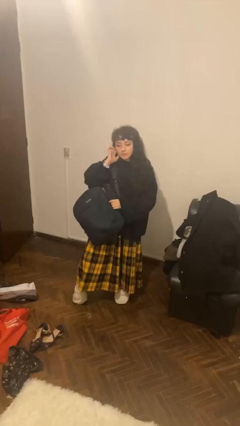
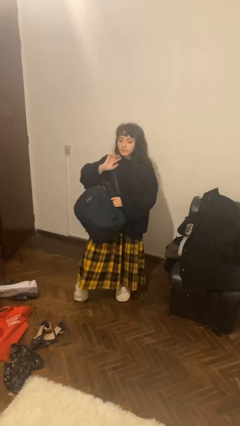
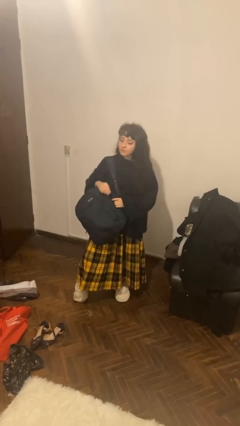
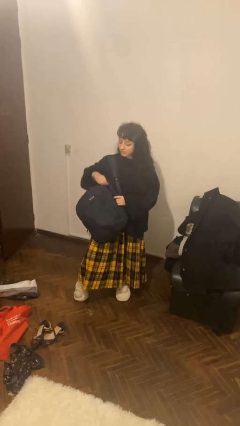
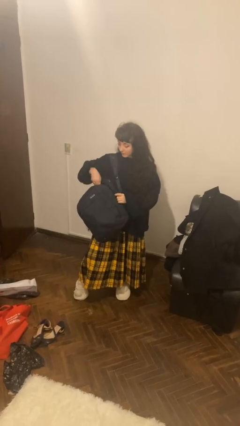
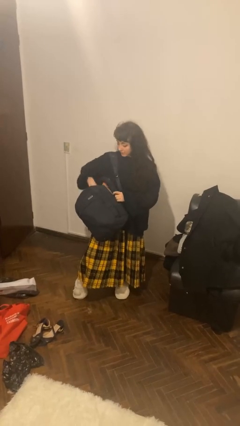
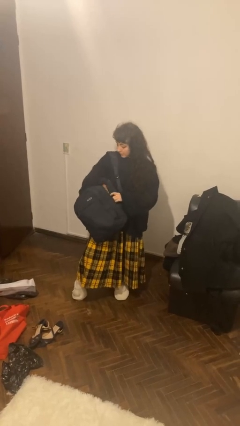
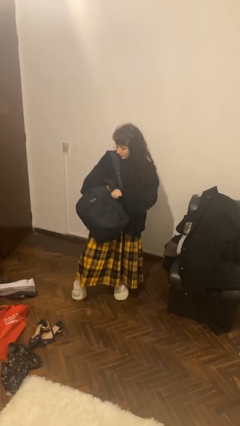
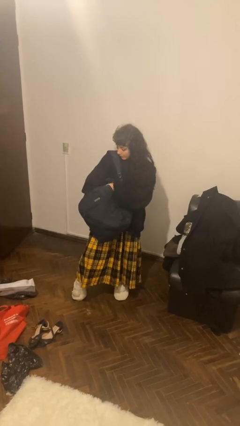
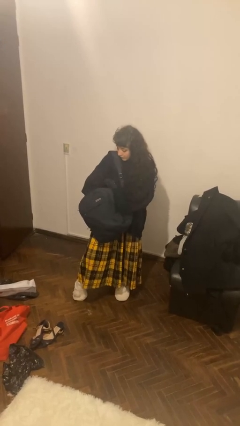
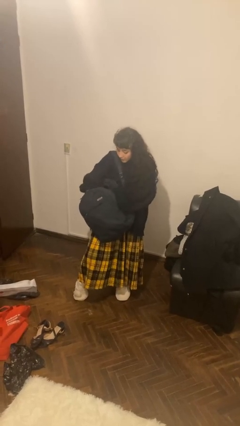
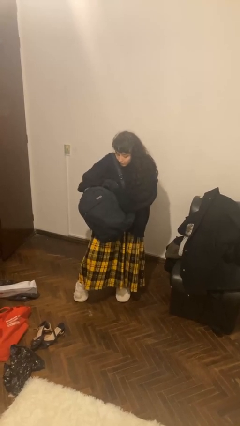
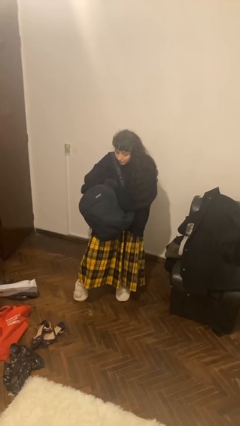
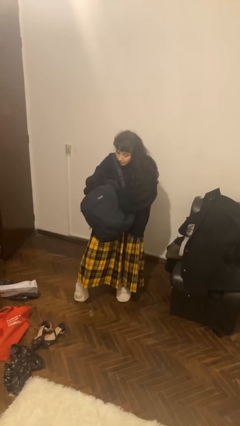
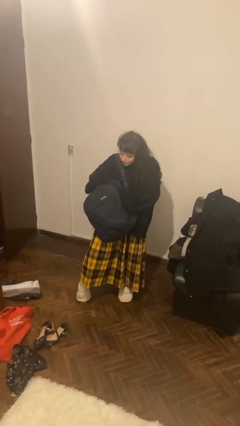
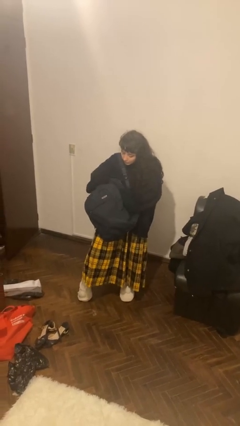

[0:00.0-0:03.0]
person searches in backpack

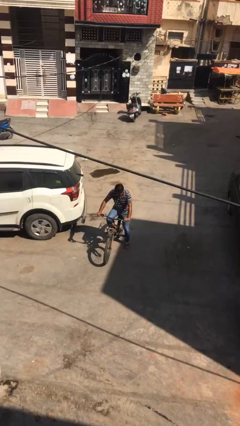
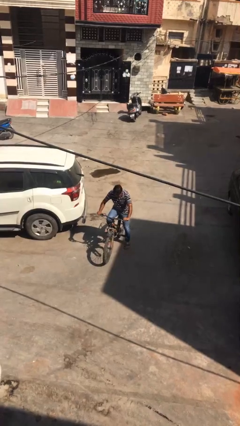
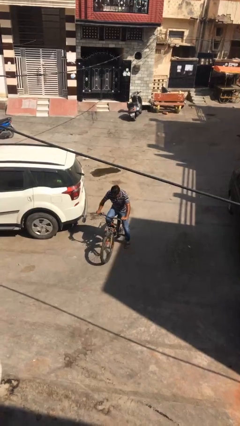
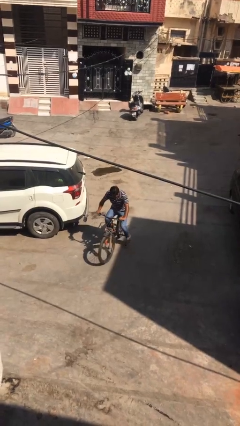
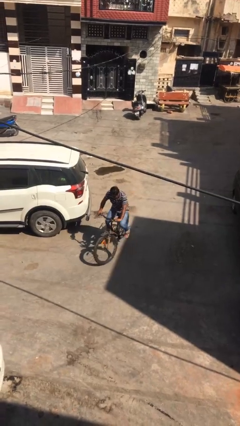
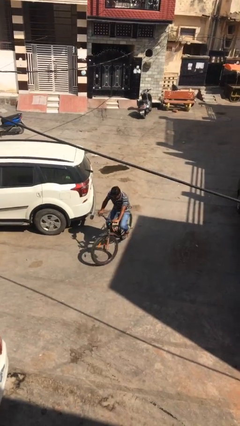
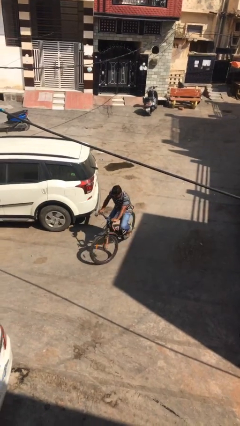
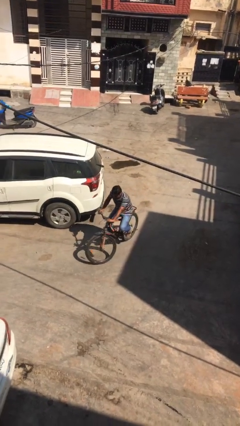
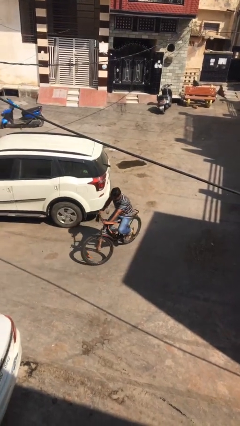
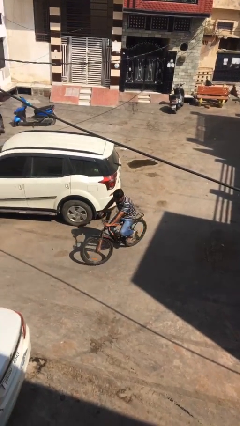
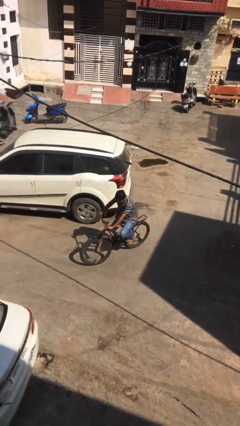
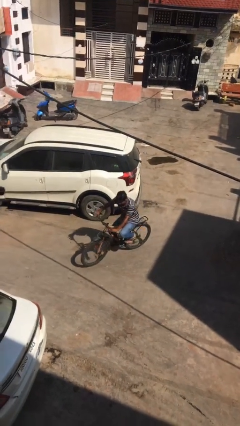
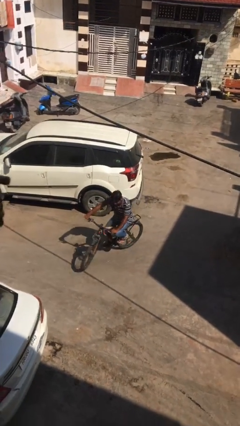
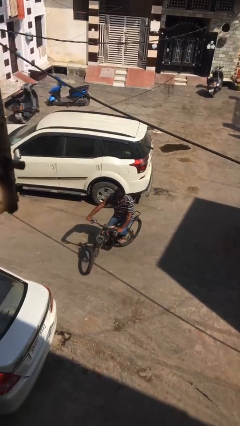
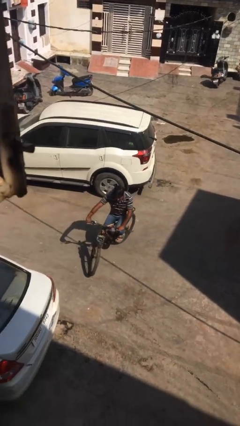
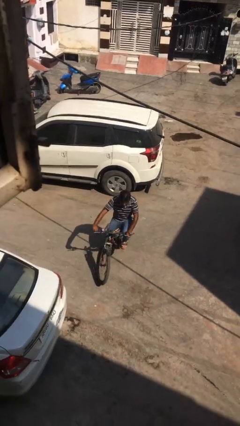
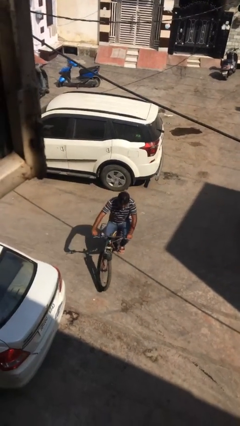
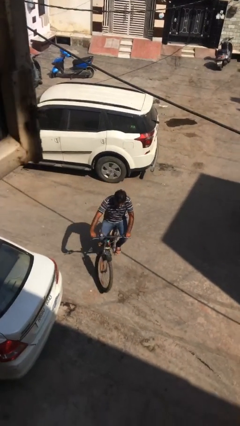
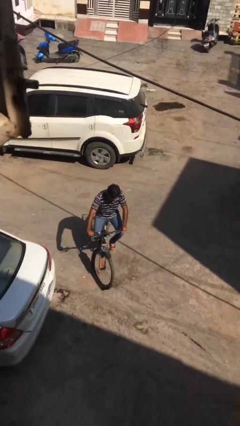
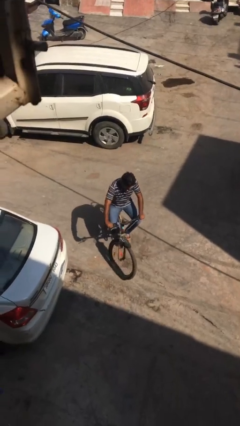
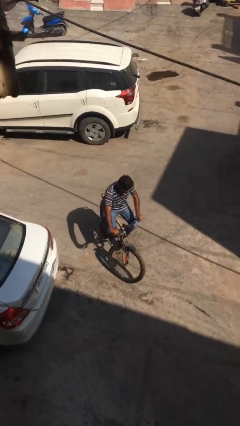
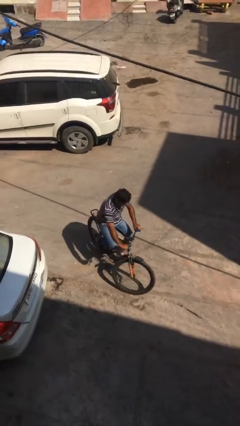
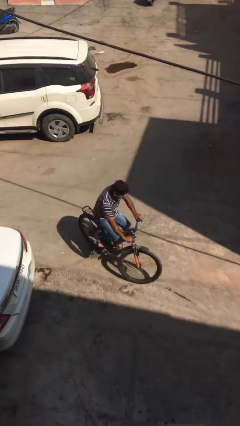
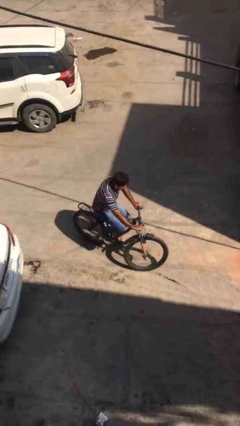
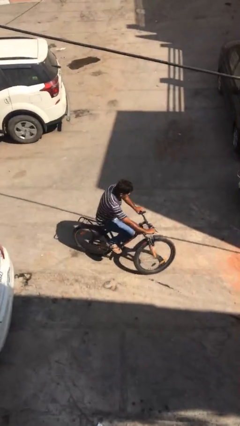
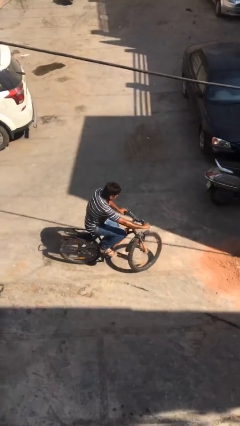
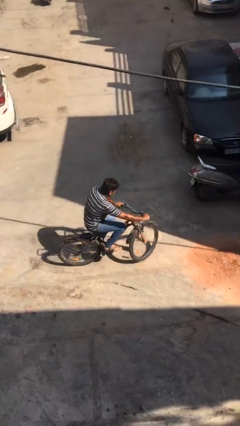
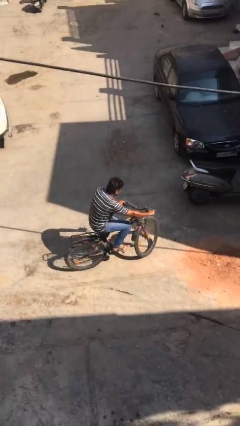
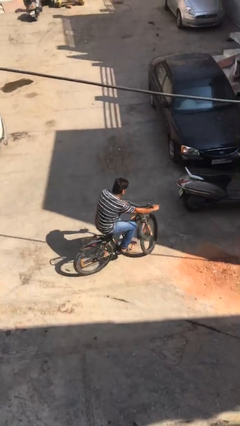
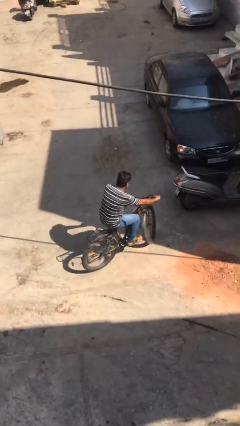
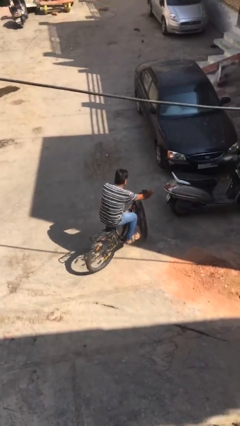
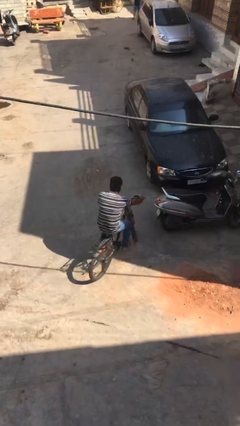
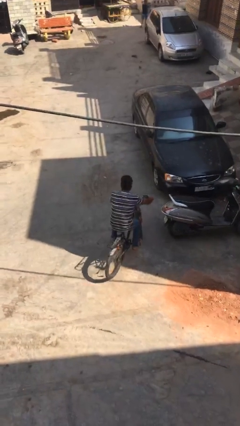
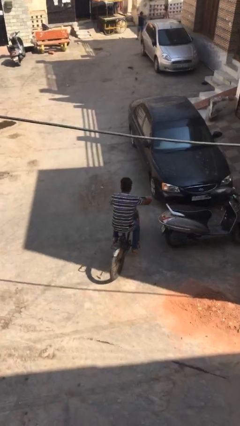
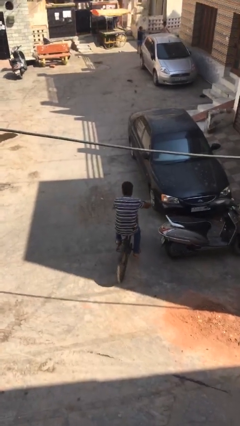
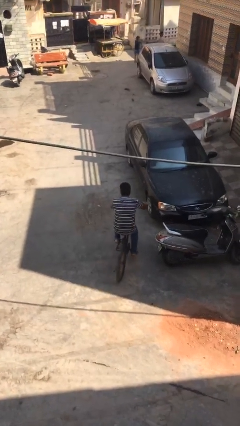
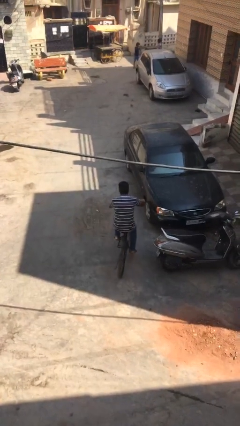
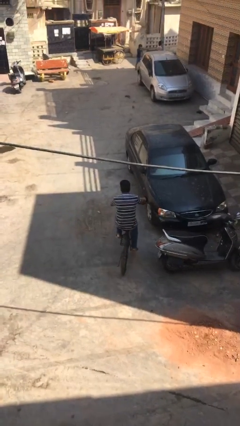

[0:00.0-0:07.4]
person rides bicycle

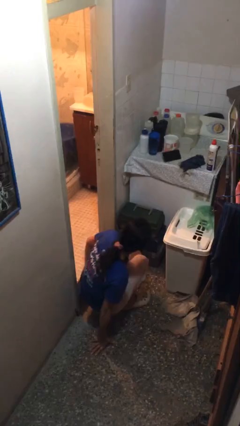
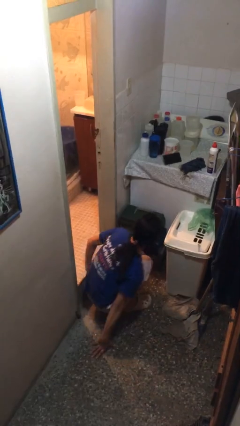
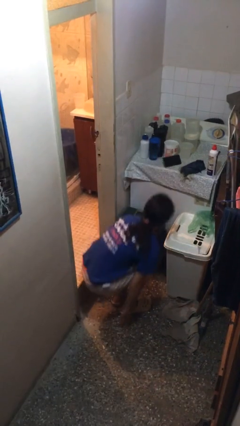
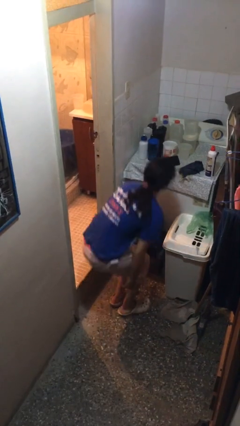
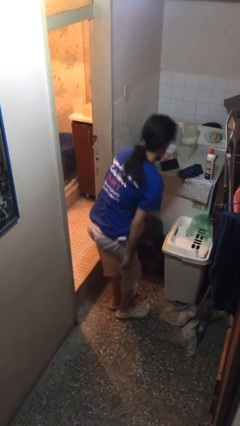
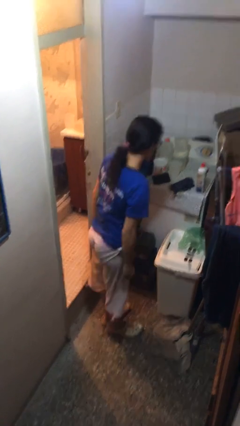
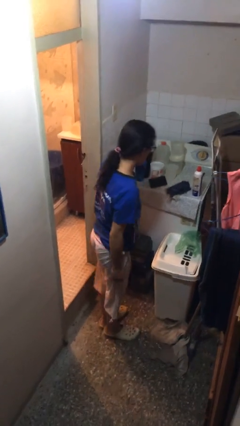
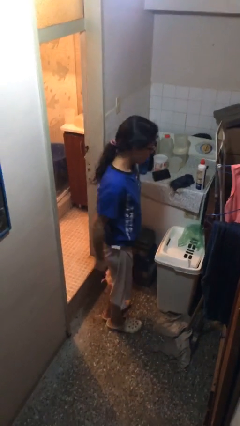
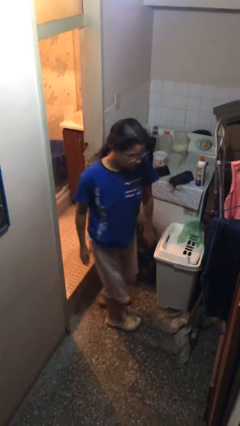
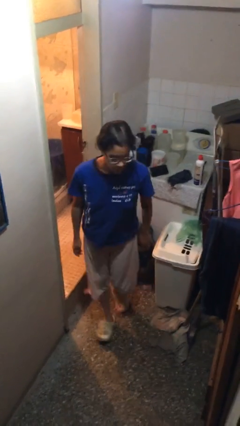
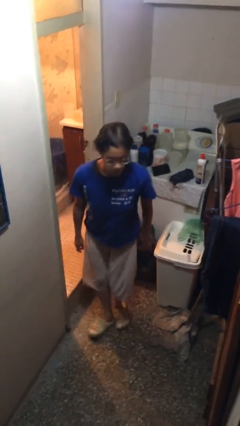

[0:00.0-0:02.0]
person stands up

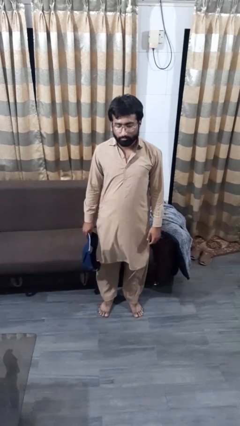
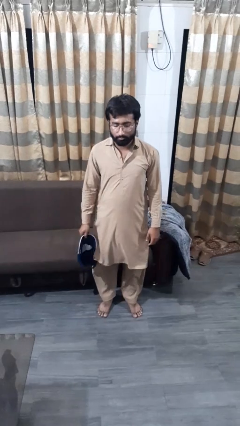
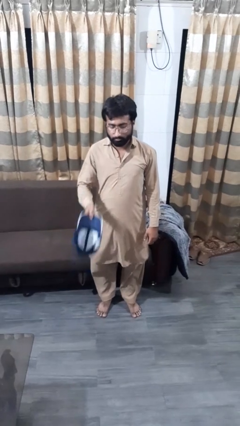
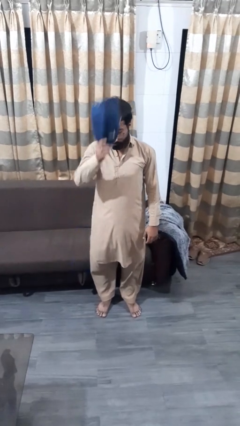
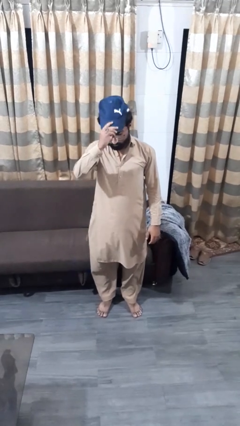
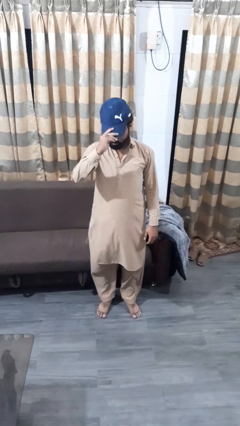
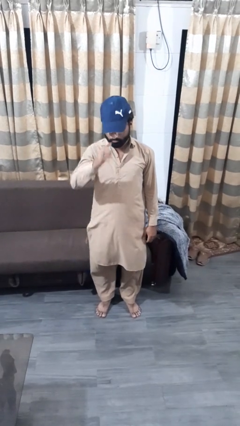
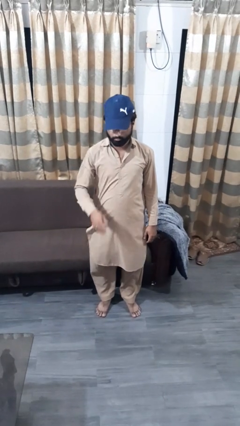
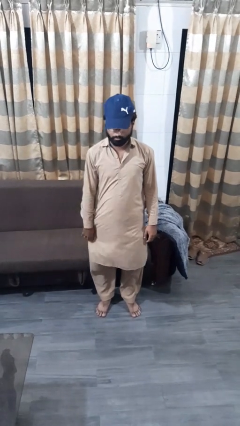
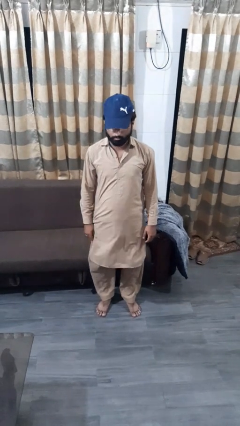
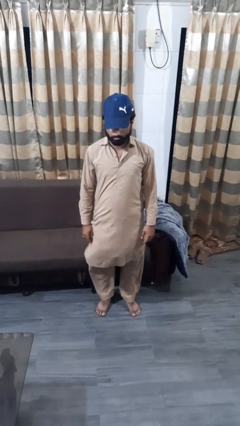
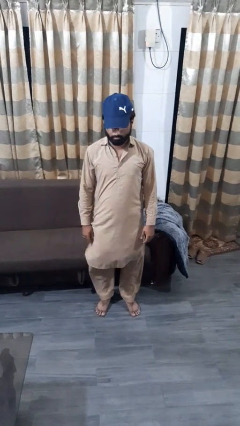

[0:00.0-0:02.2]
person puts on hat

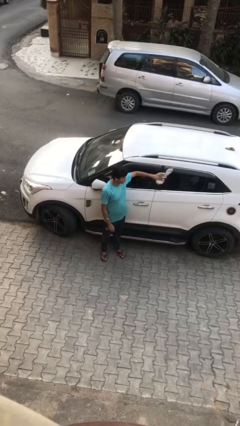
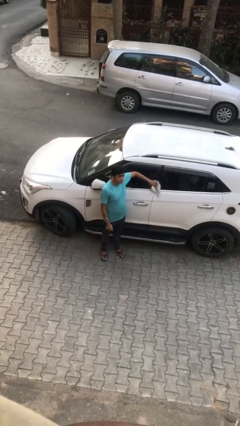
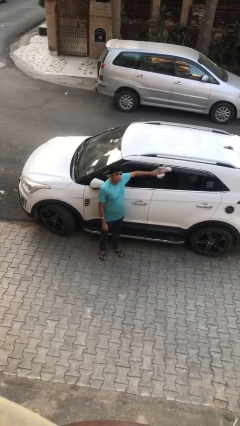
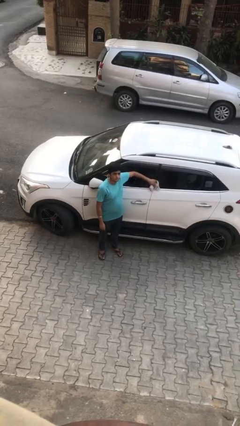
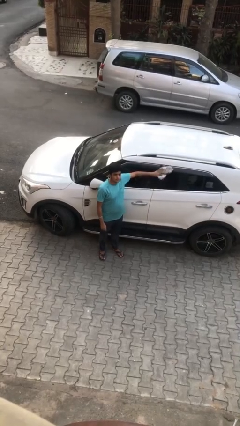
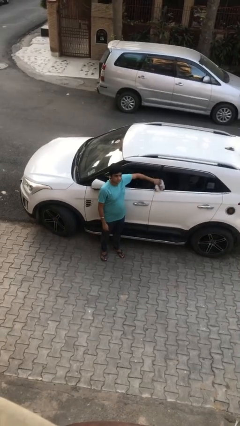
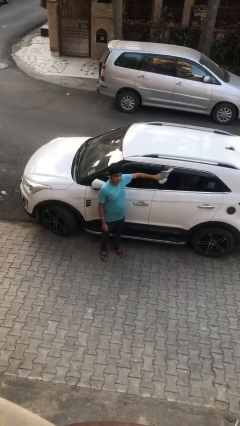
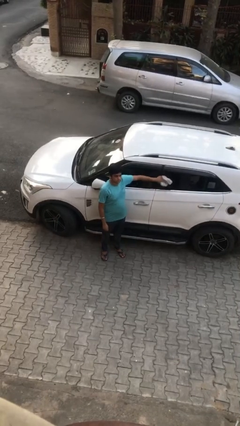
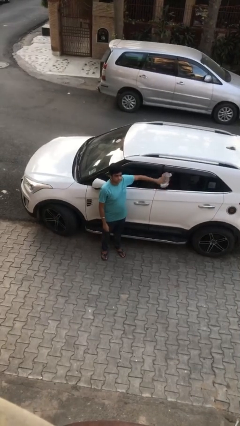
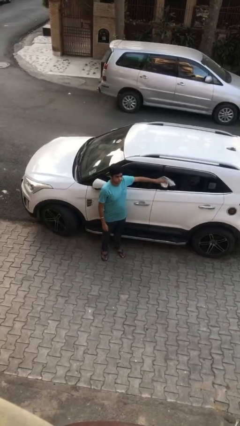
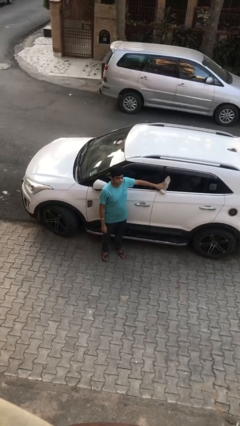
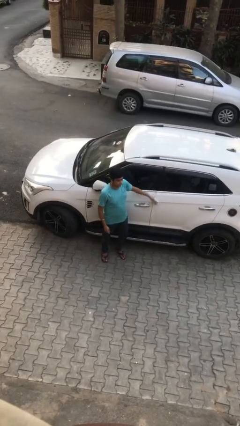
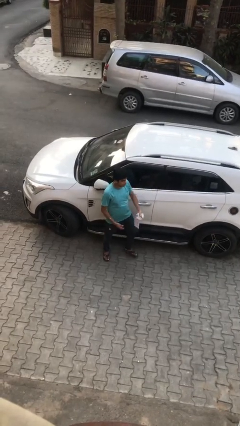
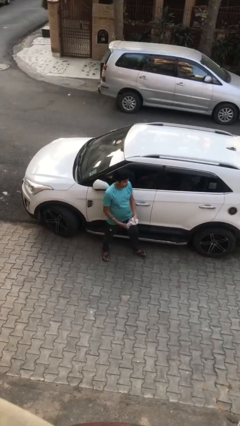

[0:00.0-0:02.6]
person polishes car with rag

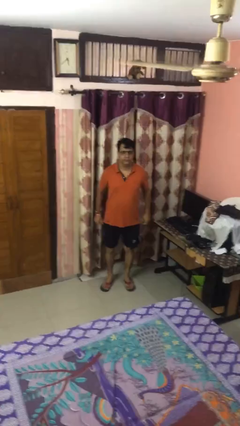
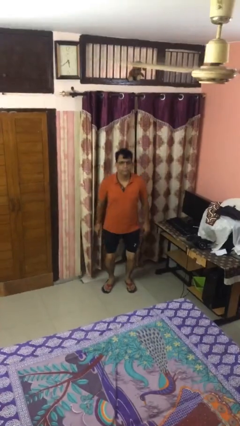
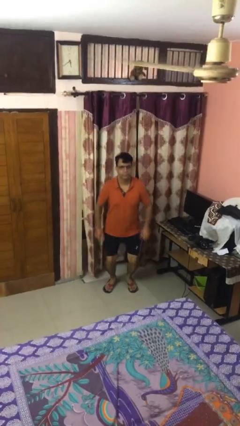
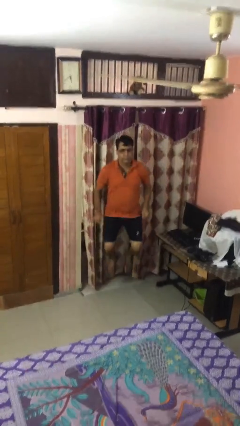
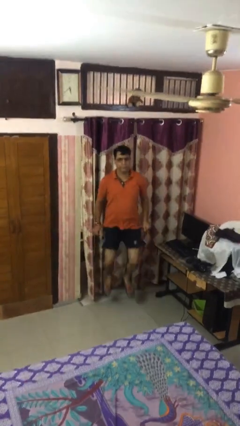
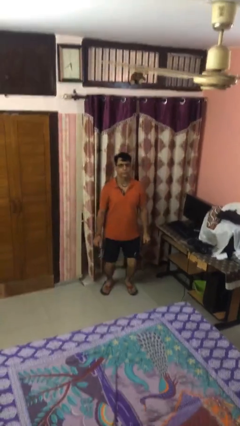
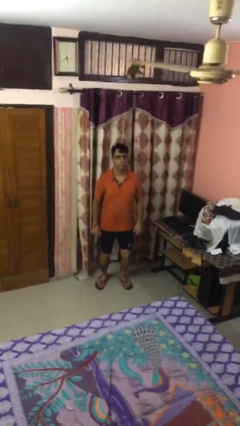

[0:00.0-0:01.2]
person jumps
